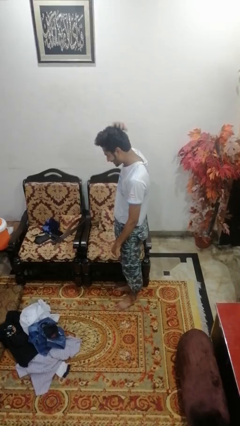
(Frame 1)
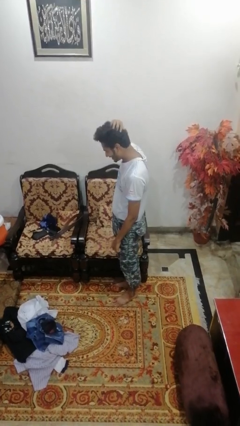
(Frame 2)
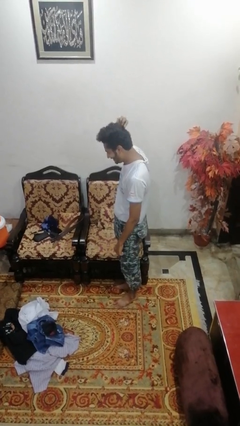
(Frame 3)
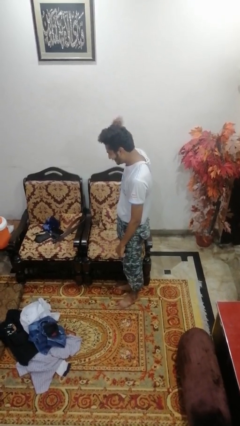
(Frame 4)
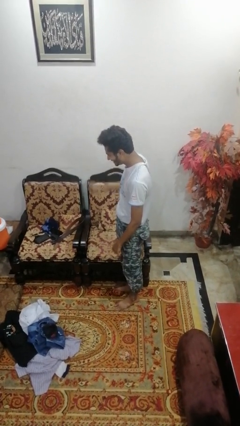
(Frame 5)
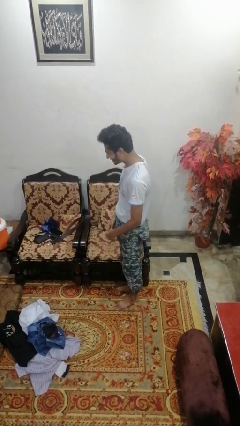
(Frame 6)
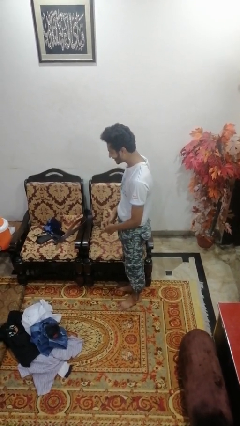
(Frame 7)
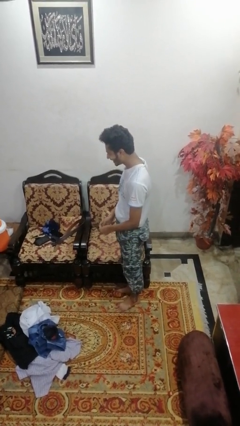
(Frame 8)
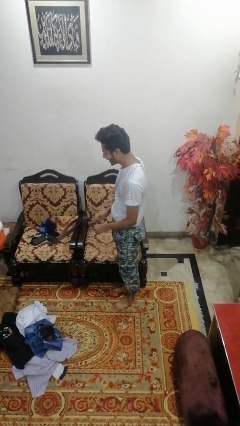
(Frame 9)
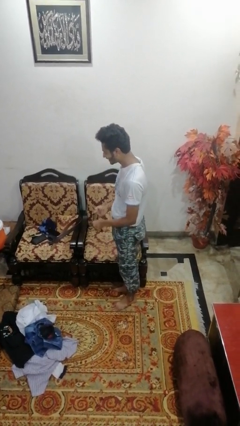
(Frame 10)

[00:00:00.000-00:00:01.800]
person takes off hairtie

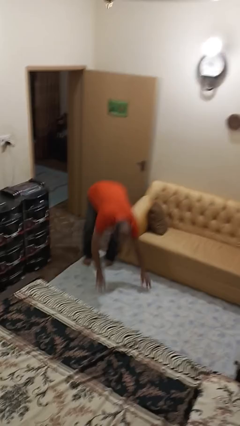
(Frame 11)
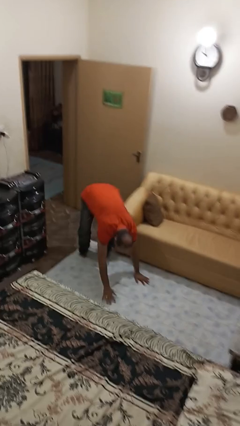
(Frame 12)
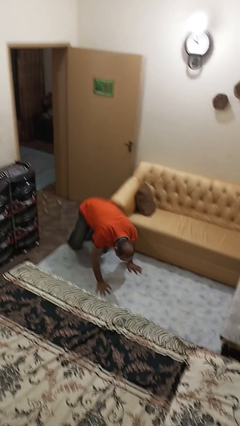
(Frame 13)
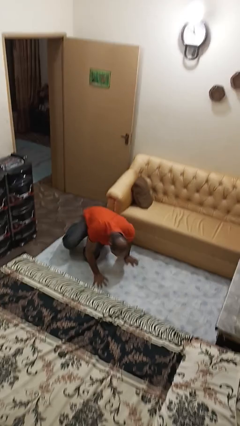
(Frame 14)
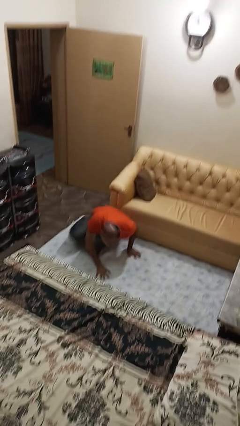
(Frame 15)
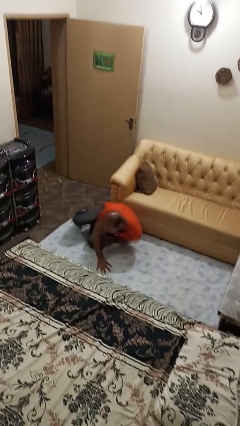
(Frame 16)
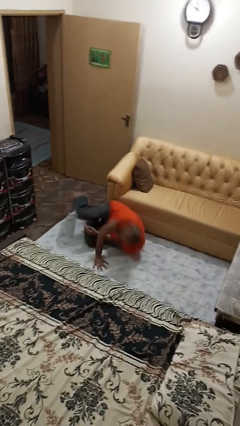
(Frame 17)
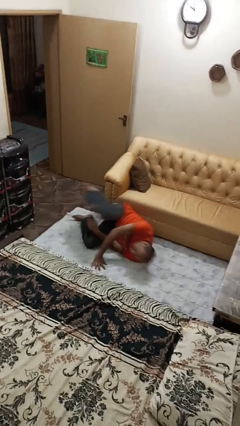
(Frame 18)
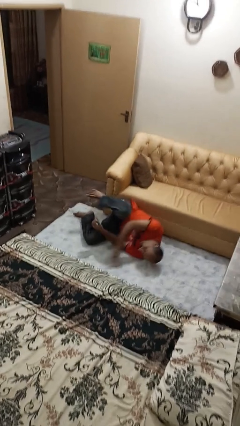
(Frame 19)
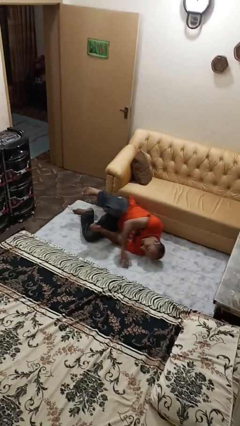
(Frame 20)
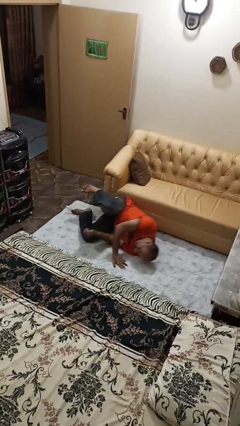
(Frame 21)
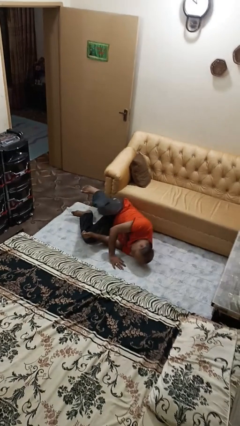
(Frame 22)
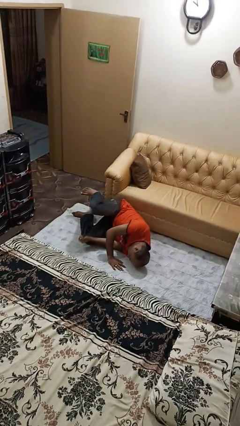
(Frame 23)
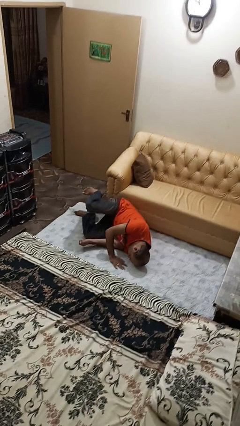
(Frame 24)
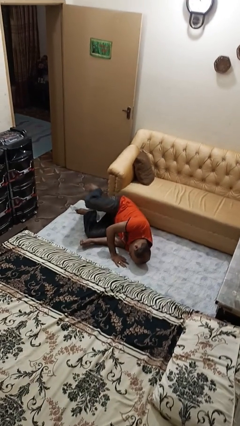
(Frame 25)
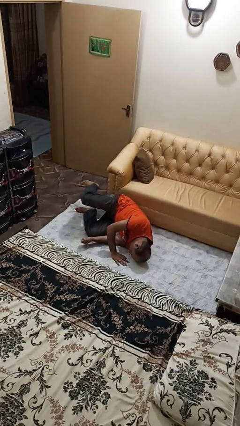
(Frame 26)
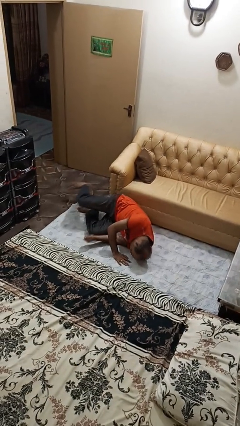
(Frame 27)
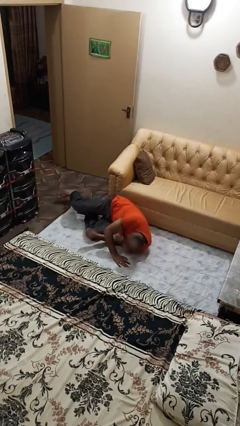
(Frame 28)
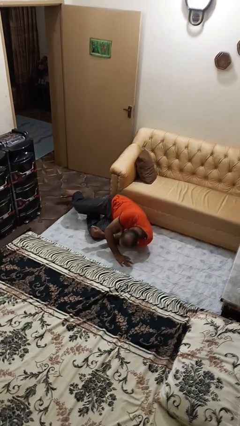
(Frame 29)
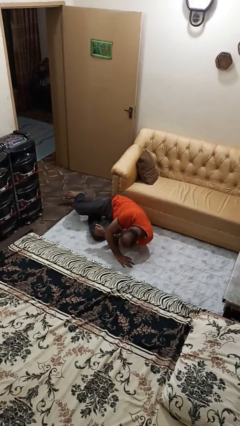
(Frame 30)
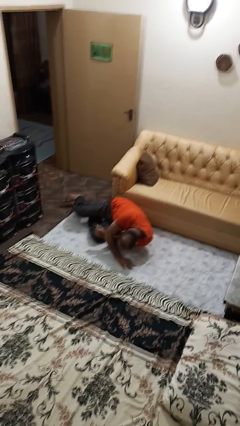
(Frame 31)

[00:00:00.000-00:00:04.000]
person lies down on floor

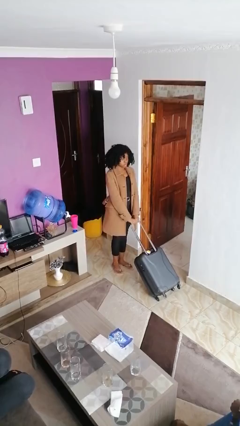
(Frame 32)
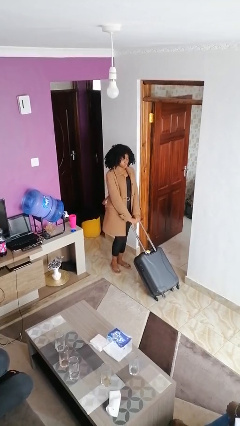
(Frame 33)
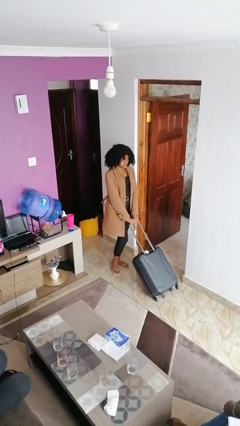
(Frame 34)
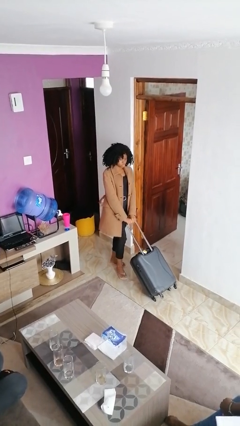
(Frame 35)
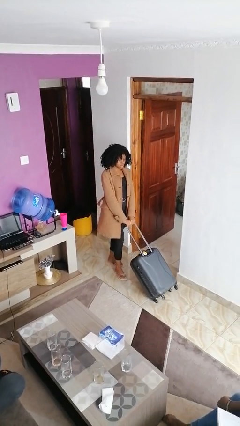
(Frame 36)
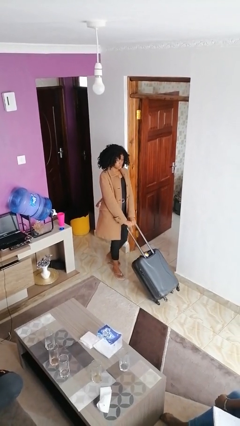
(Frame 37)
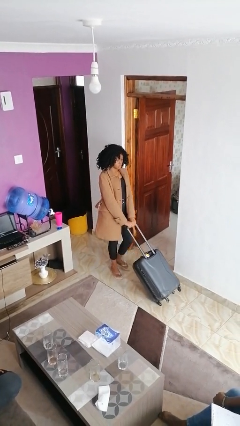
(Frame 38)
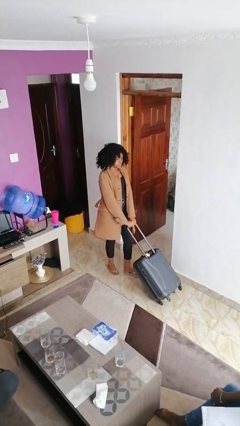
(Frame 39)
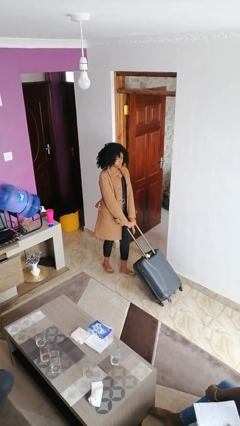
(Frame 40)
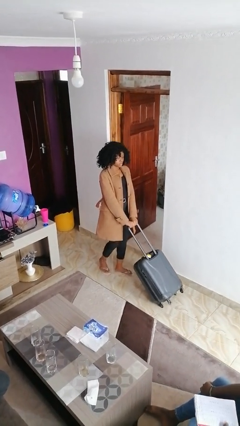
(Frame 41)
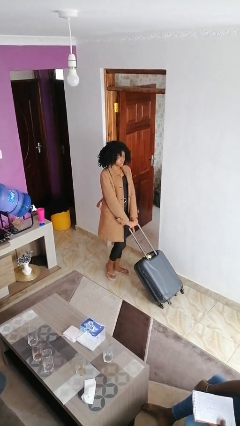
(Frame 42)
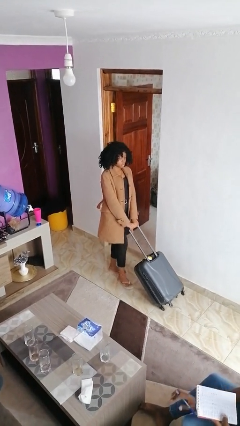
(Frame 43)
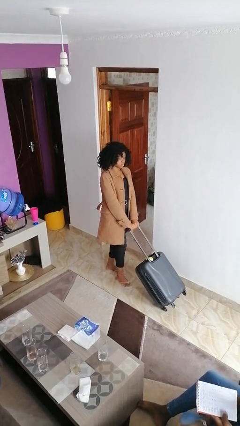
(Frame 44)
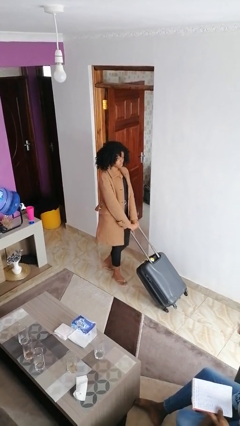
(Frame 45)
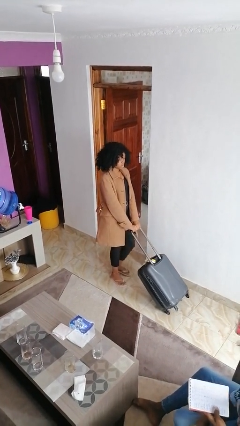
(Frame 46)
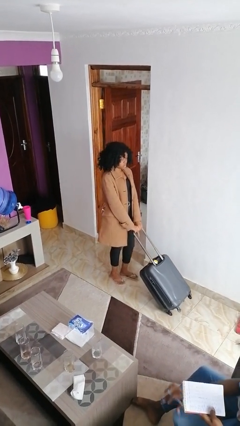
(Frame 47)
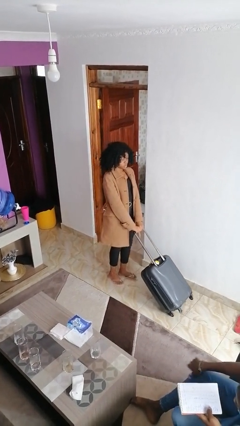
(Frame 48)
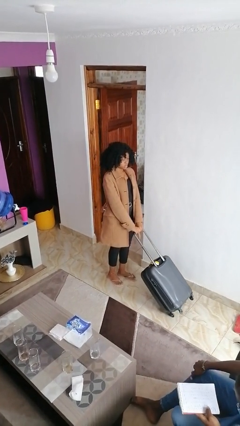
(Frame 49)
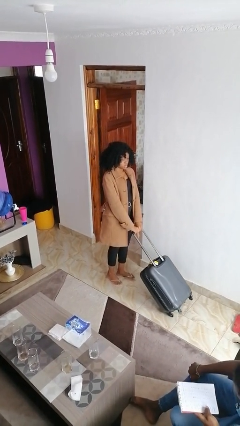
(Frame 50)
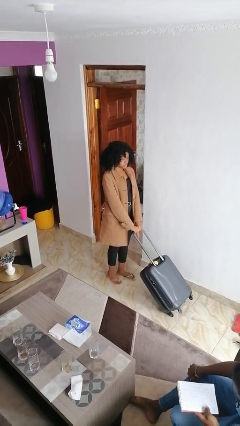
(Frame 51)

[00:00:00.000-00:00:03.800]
person pushes wheeled cart

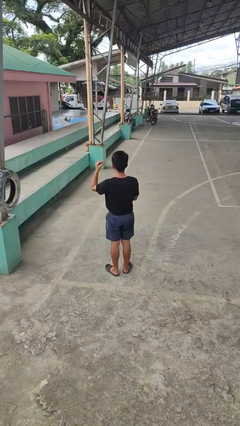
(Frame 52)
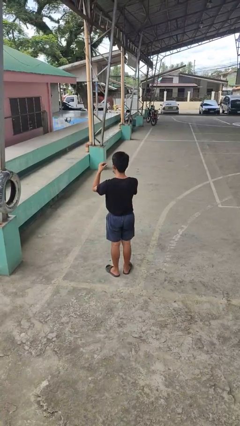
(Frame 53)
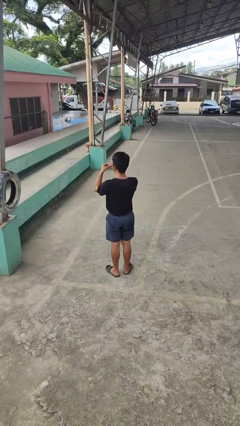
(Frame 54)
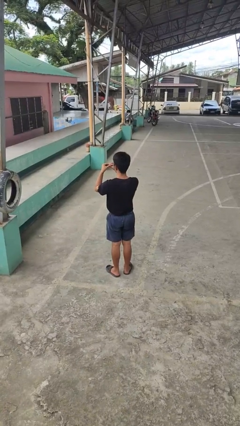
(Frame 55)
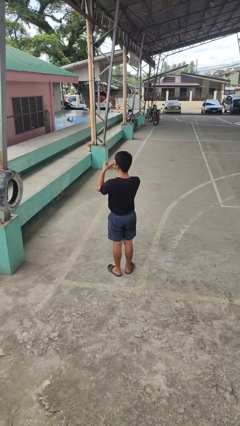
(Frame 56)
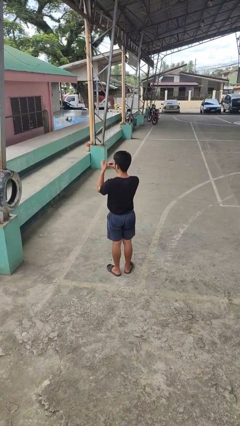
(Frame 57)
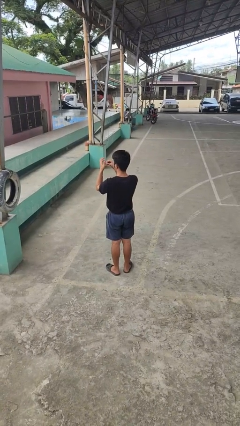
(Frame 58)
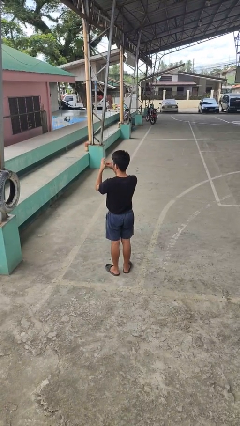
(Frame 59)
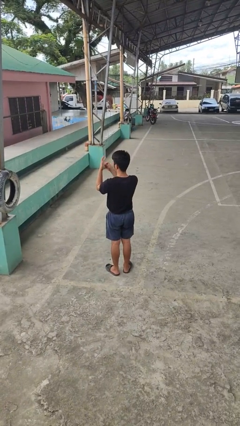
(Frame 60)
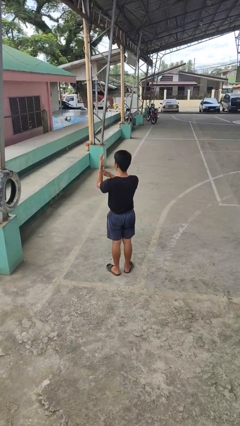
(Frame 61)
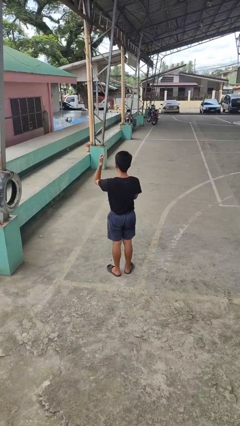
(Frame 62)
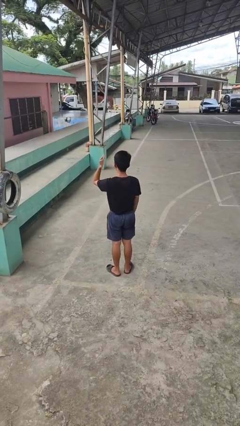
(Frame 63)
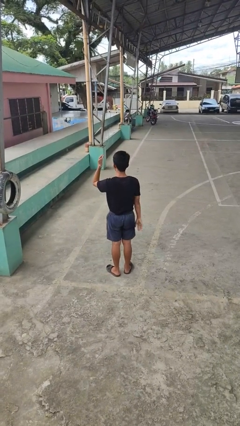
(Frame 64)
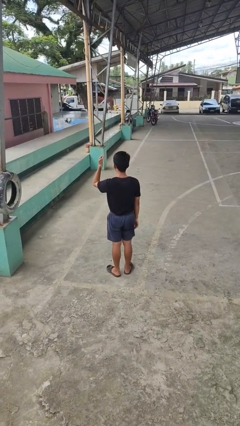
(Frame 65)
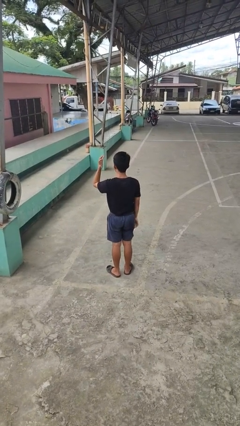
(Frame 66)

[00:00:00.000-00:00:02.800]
person puts on ring

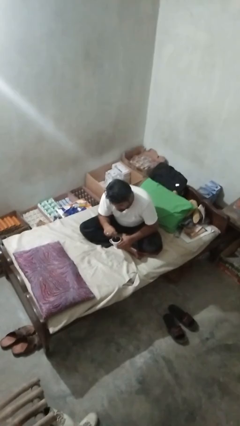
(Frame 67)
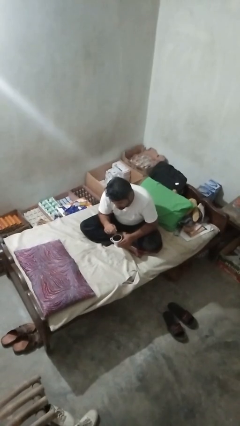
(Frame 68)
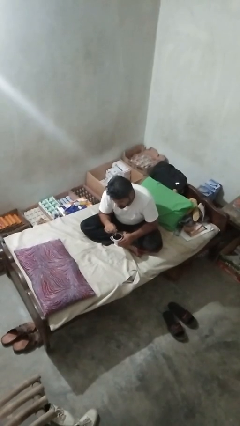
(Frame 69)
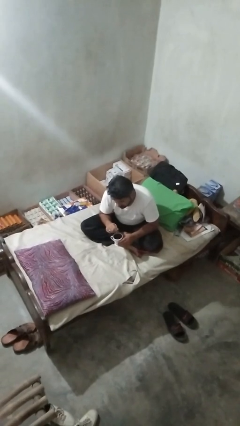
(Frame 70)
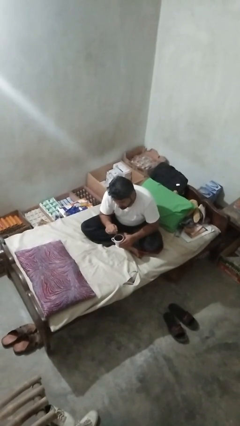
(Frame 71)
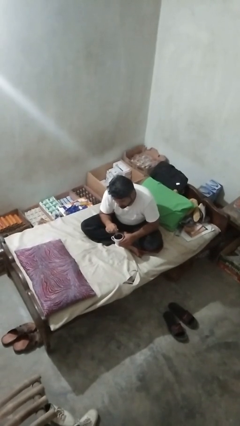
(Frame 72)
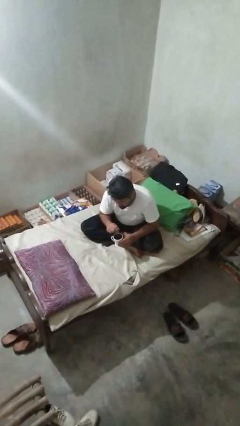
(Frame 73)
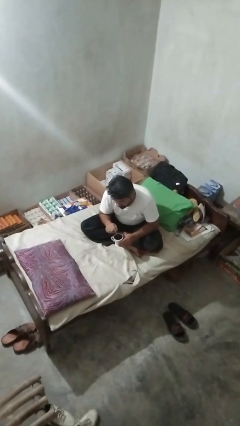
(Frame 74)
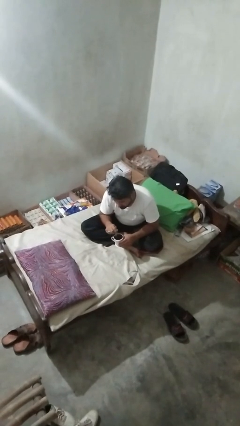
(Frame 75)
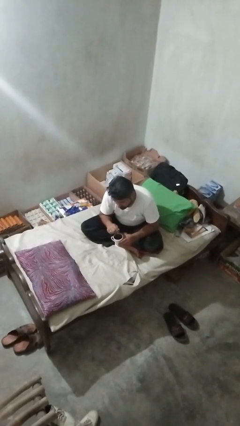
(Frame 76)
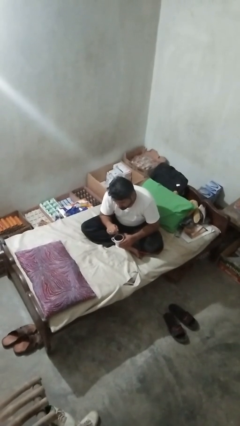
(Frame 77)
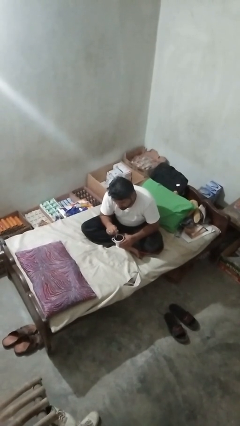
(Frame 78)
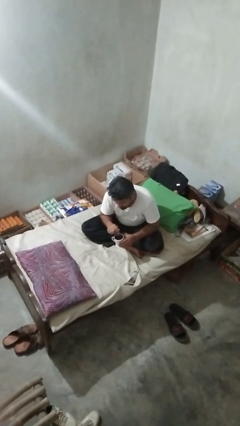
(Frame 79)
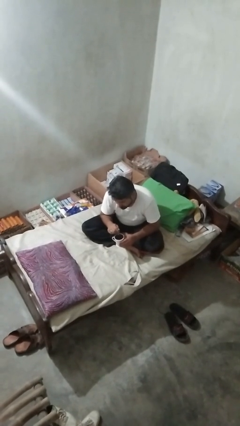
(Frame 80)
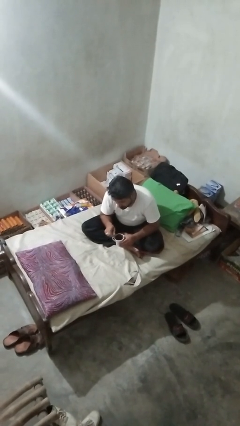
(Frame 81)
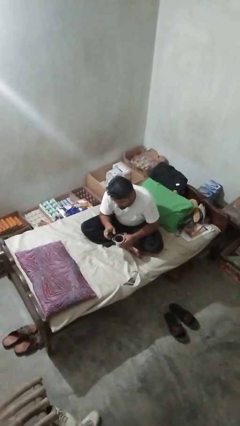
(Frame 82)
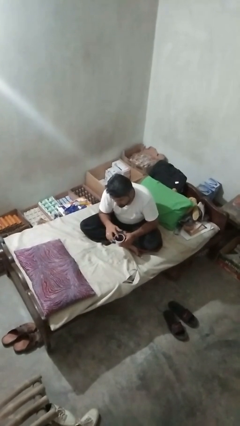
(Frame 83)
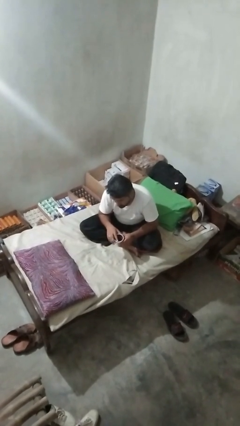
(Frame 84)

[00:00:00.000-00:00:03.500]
person stirs mug

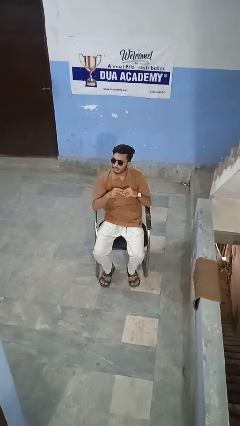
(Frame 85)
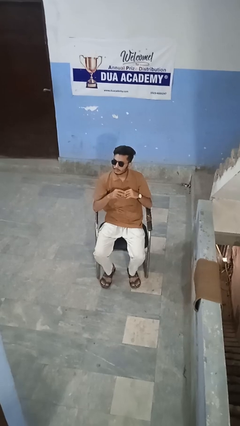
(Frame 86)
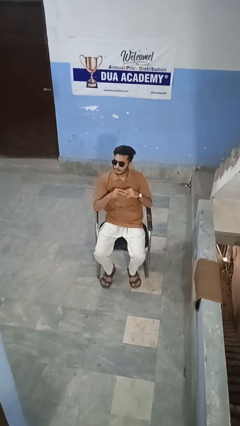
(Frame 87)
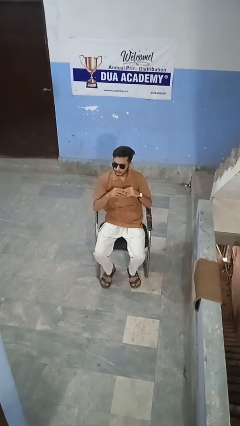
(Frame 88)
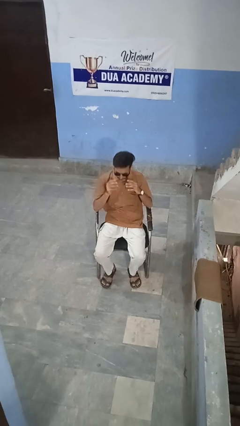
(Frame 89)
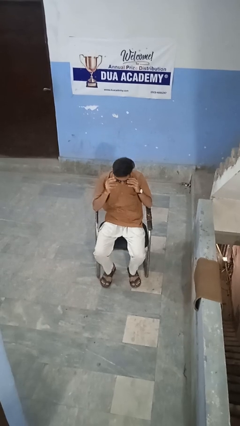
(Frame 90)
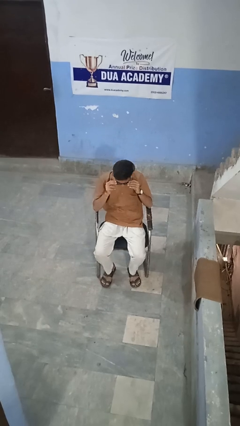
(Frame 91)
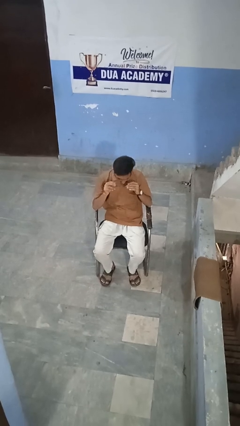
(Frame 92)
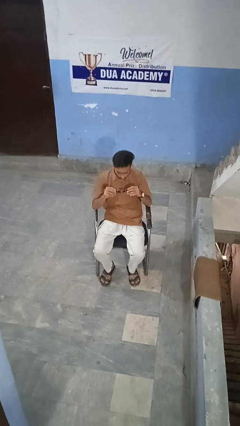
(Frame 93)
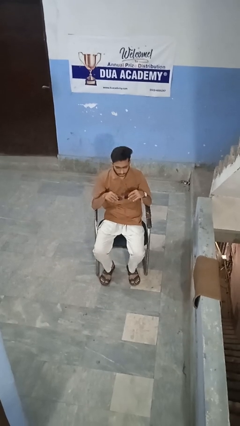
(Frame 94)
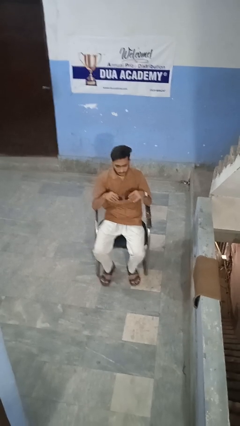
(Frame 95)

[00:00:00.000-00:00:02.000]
person takes off sunglasses
